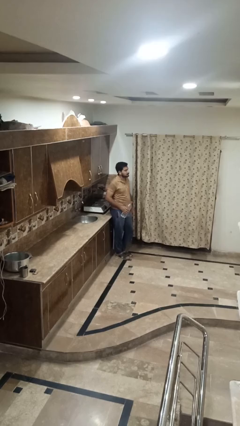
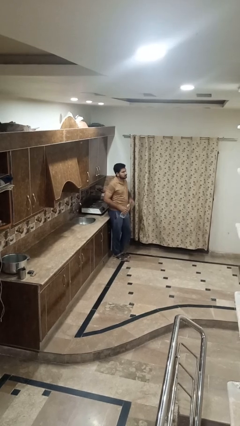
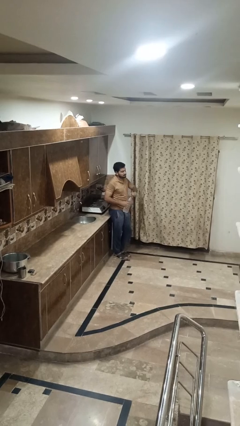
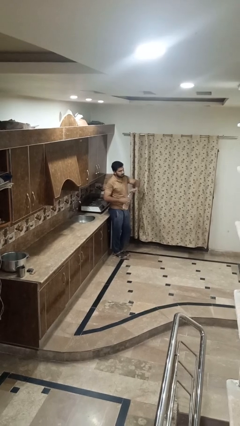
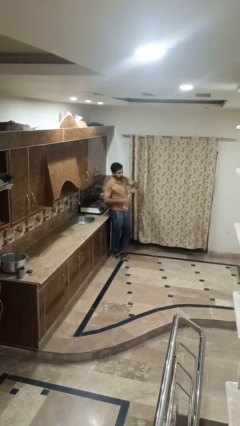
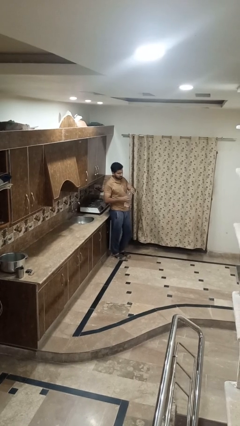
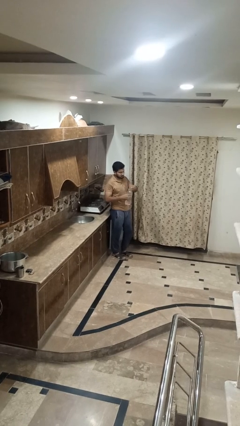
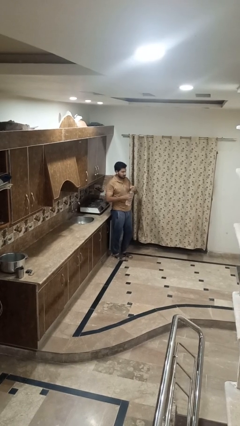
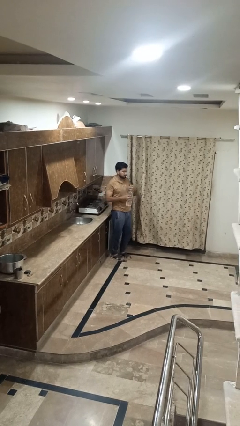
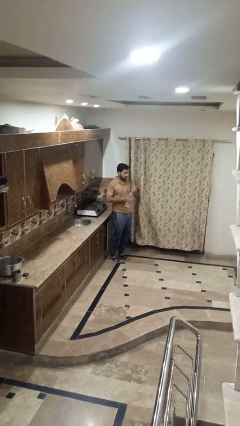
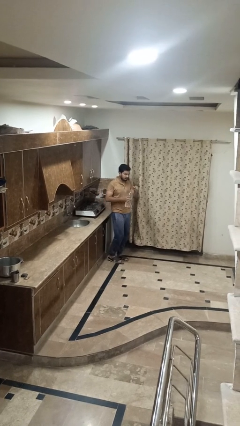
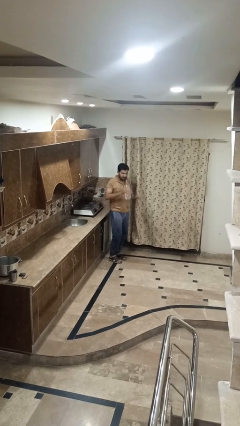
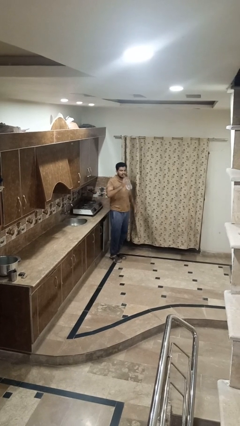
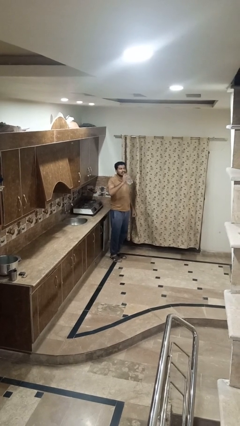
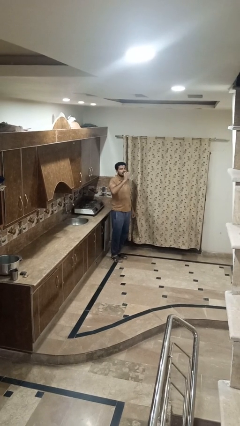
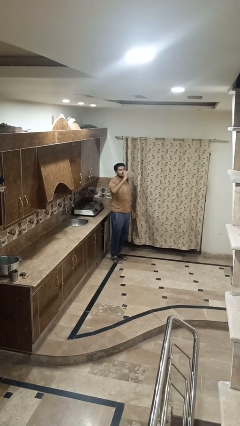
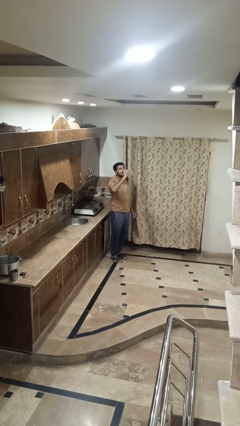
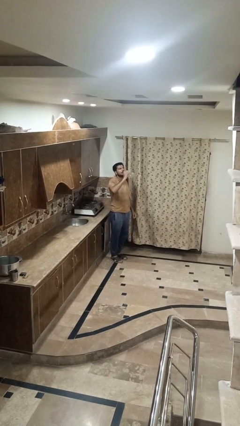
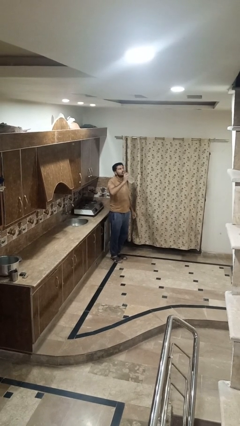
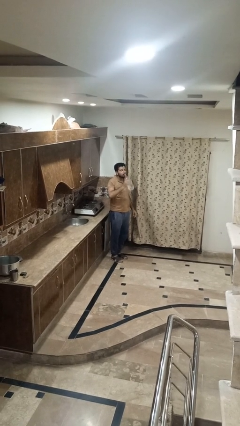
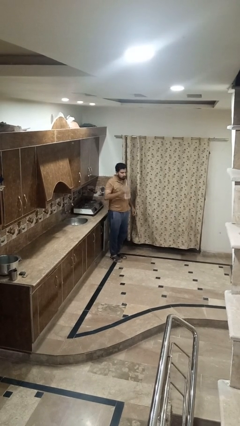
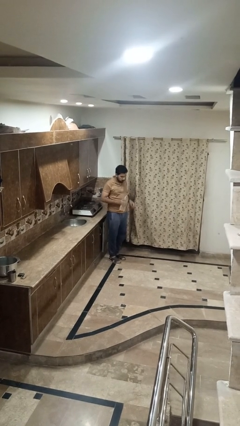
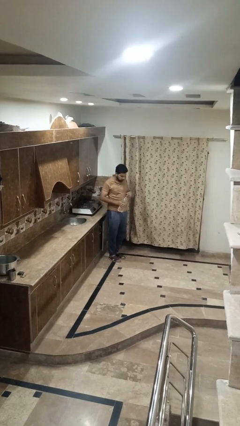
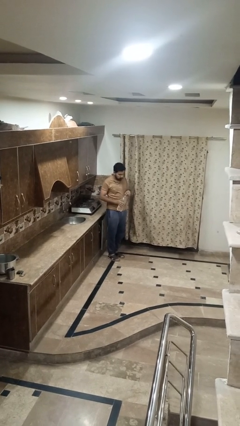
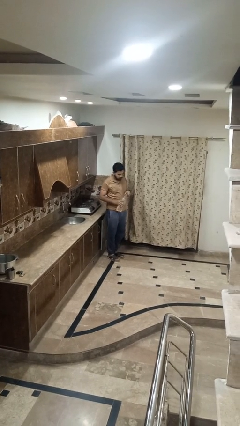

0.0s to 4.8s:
person drinks from bottle

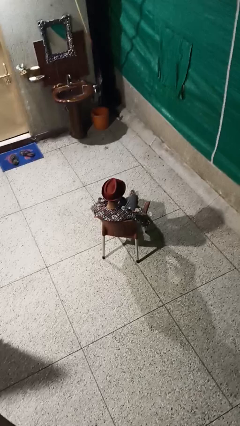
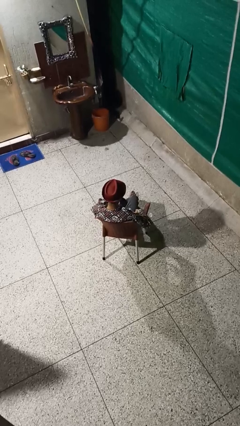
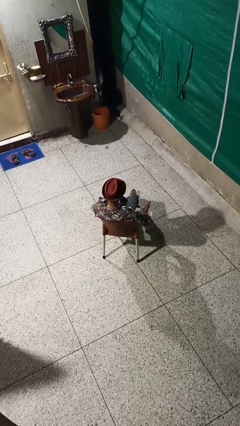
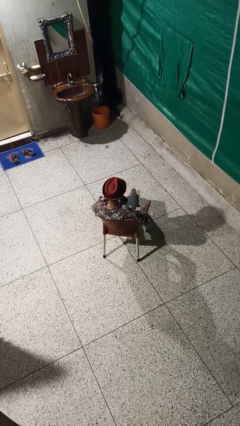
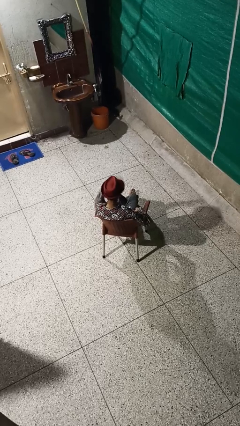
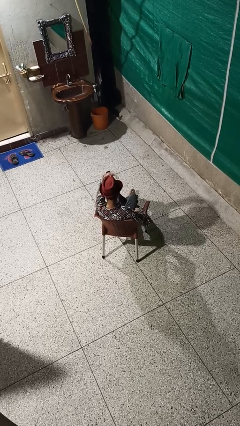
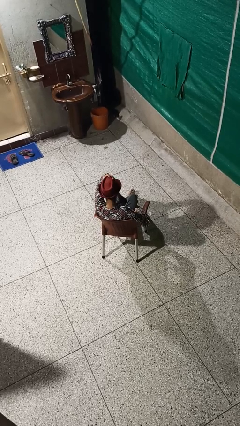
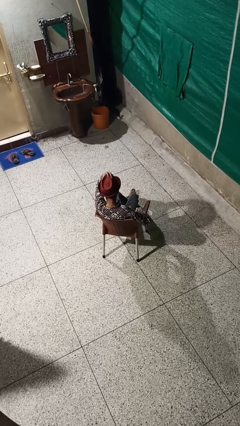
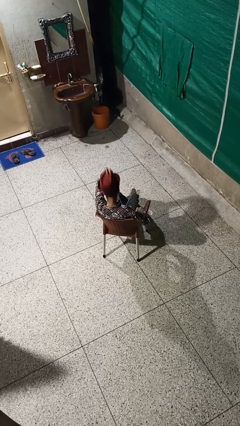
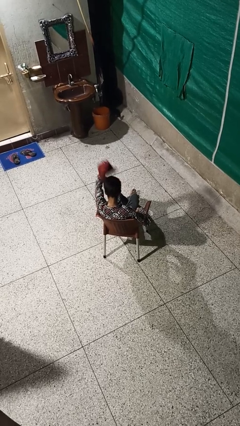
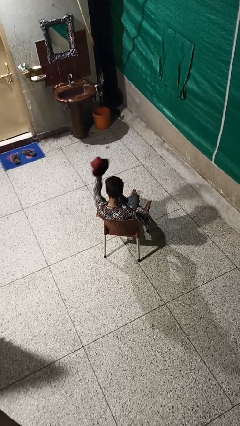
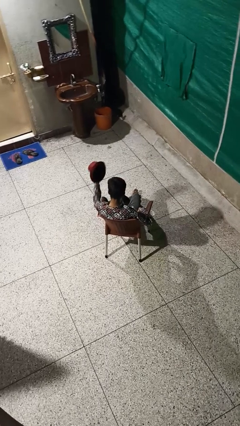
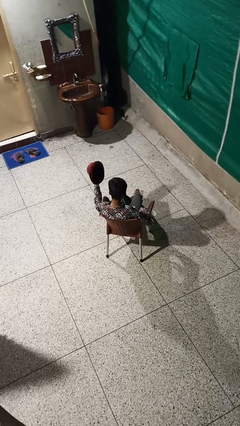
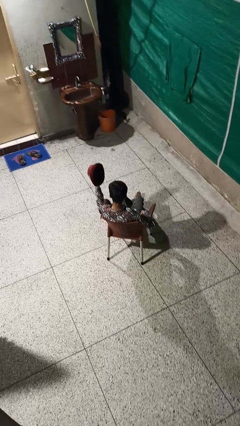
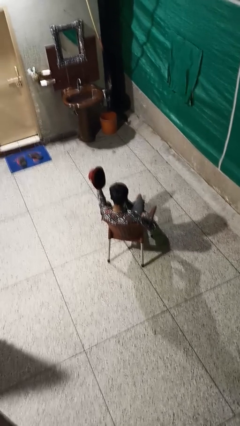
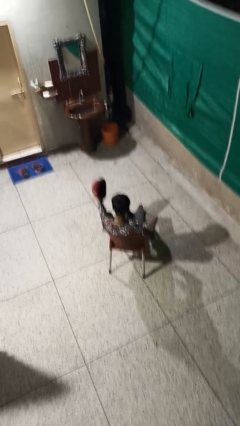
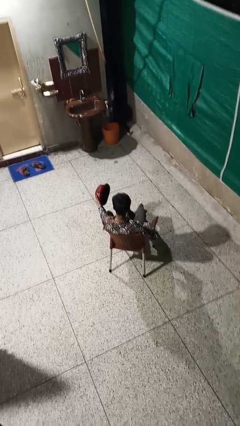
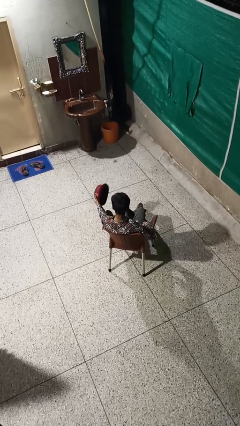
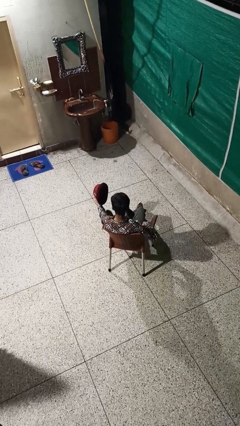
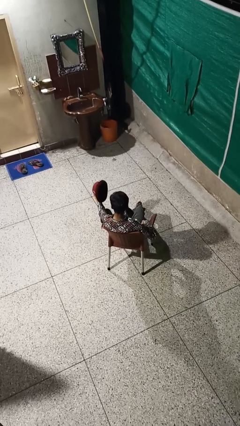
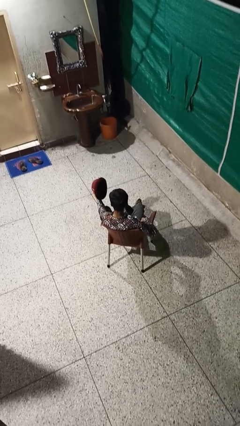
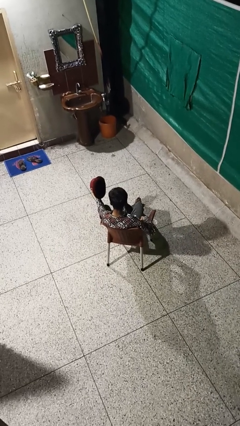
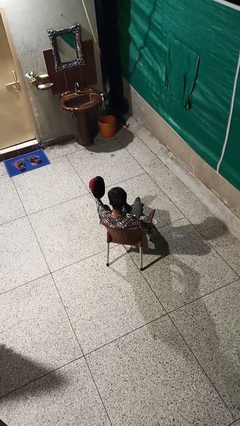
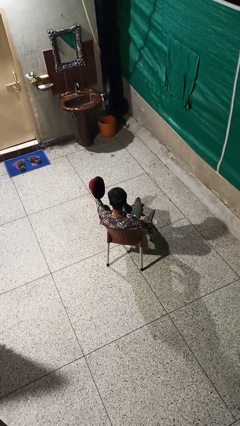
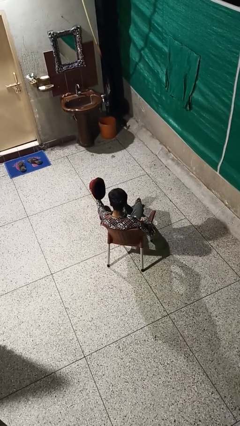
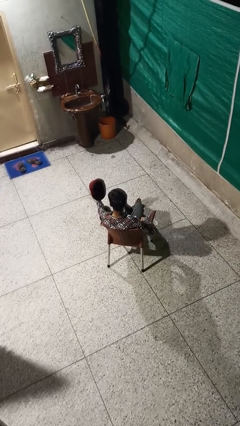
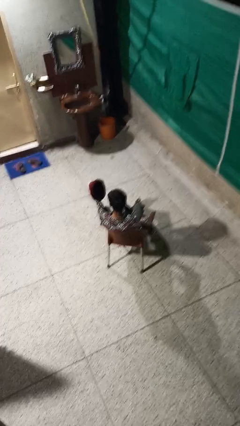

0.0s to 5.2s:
person takes off hat

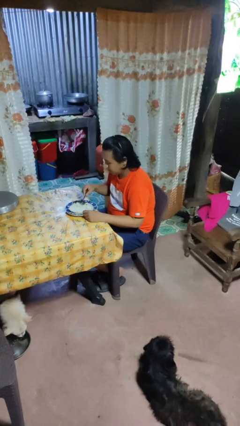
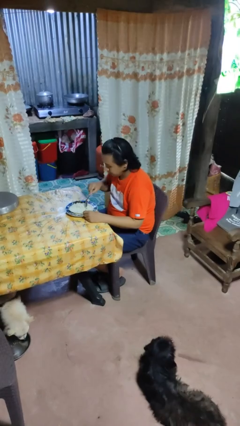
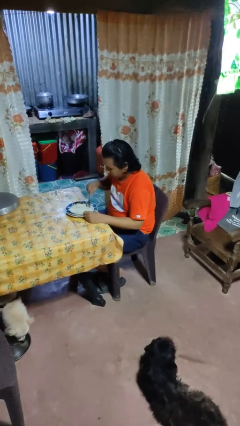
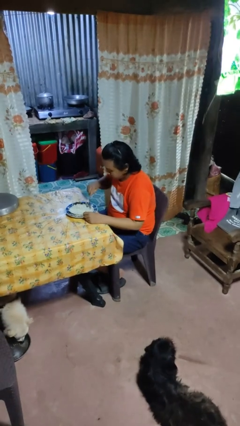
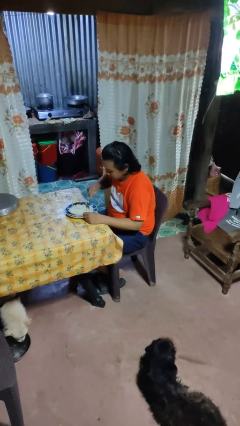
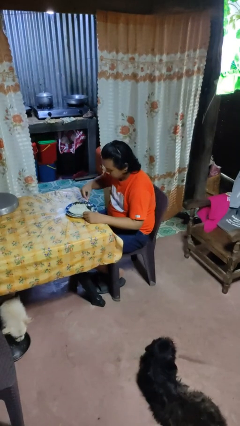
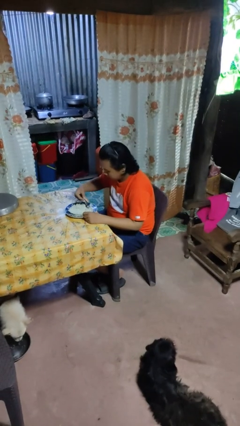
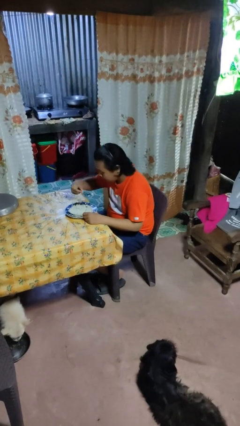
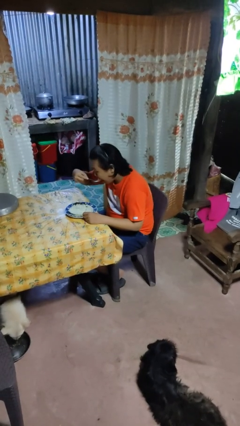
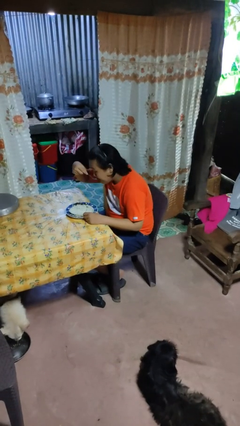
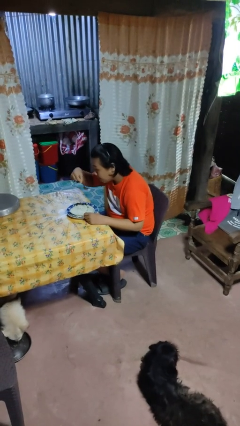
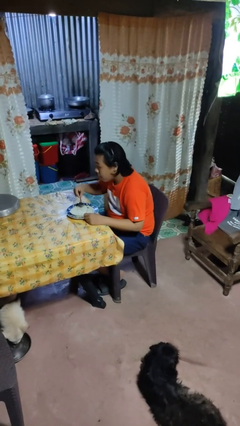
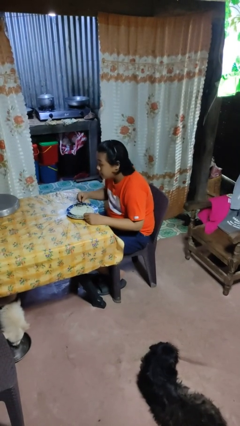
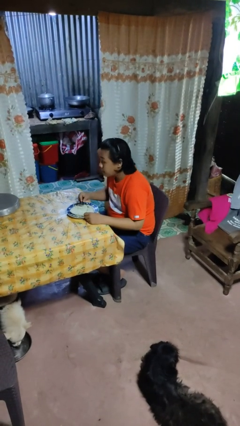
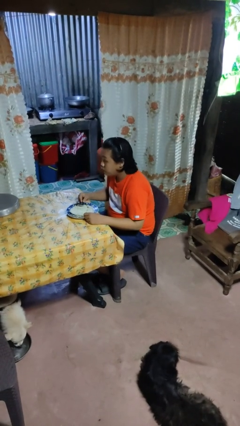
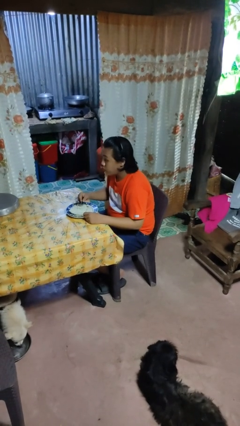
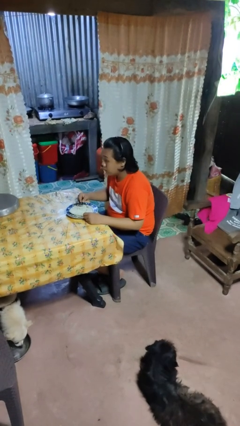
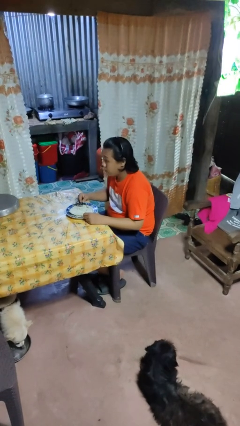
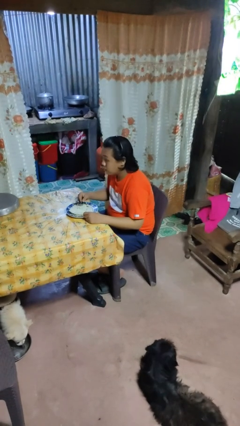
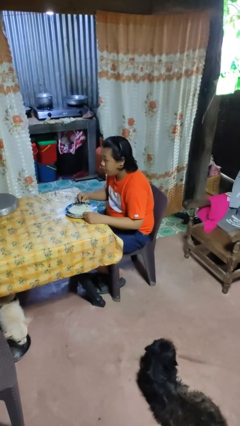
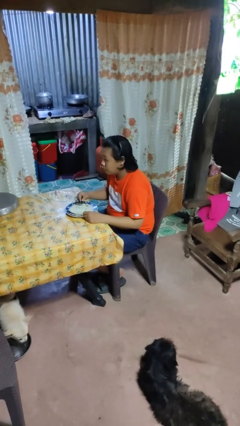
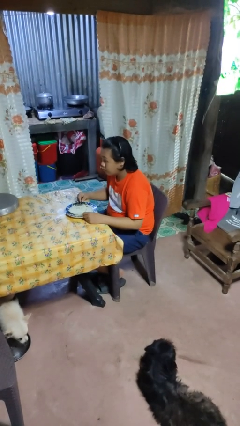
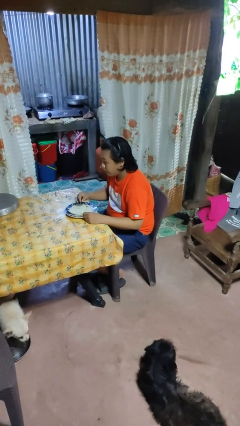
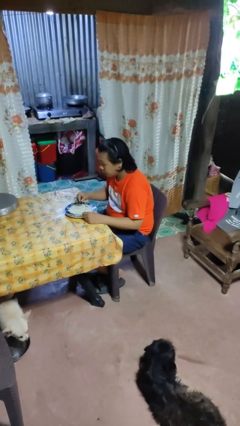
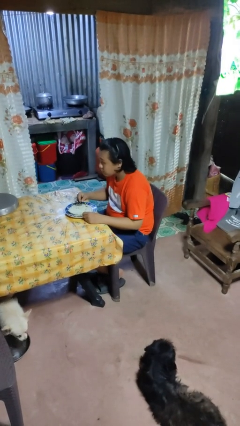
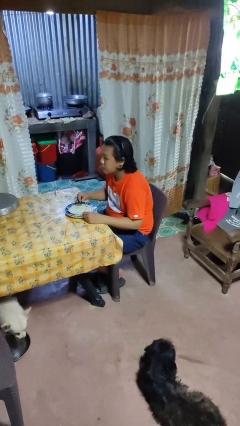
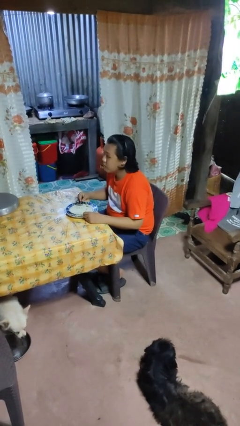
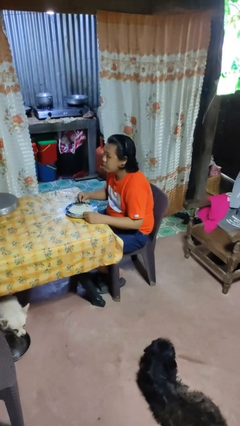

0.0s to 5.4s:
person eats with utensil

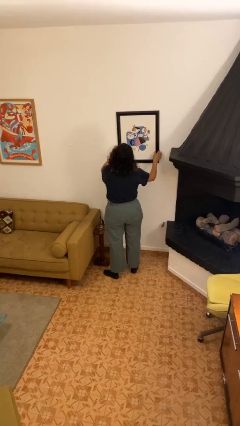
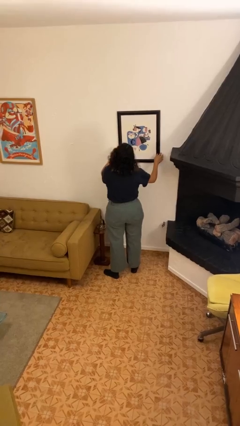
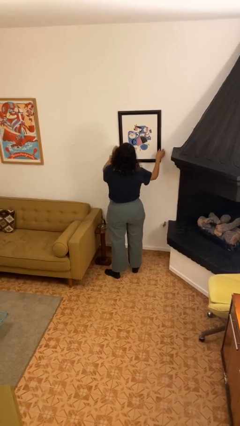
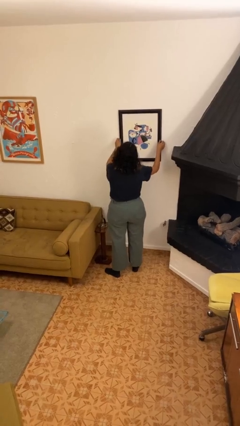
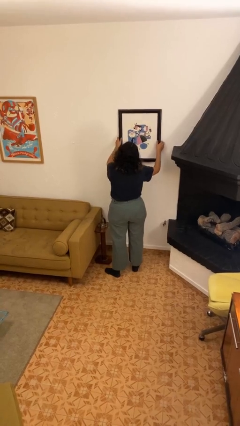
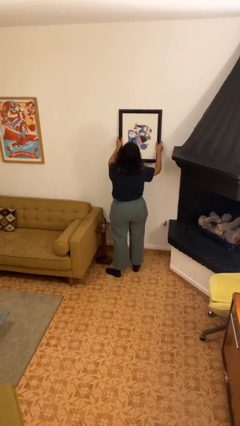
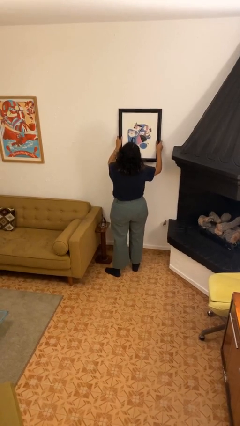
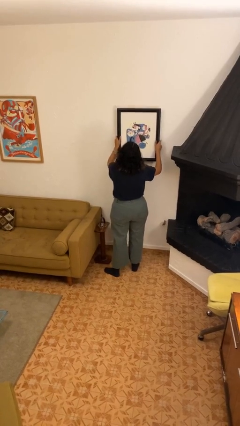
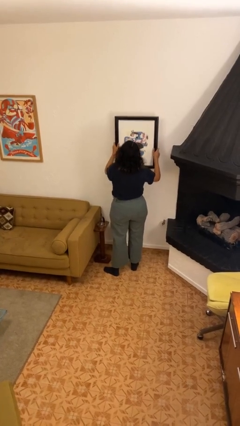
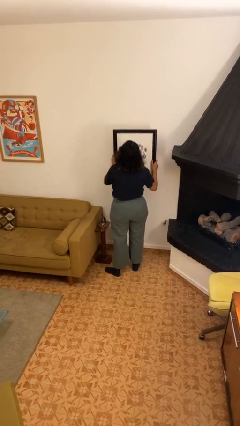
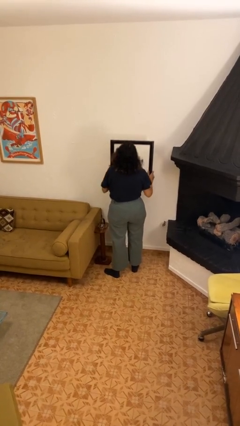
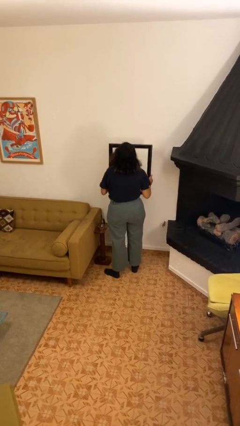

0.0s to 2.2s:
person takes down picture frame

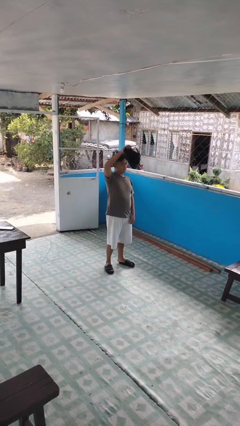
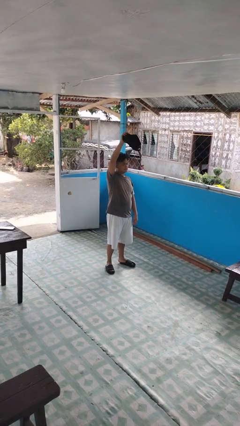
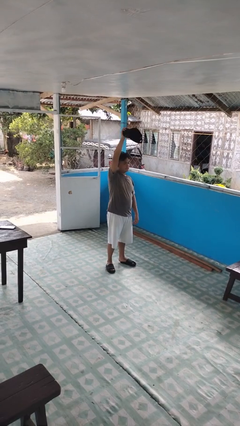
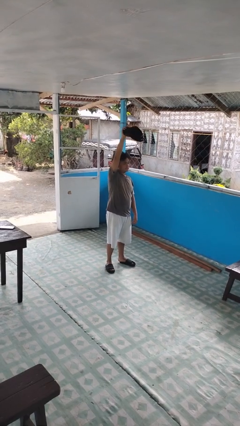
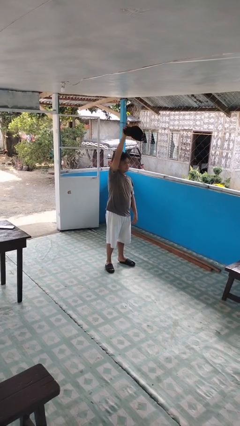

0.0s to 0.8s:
person drops object
